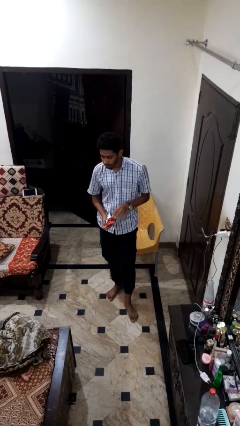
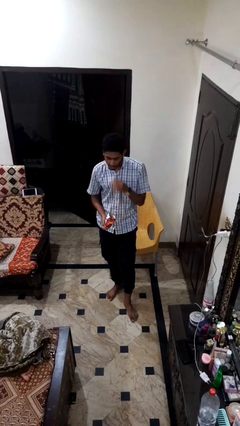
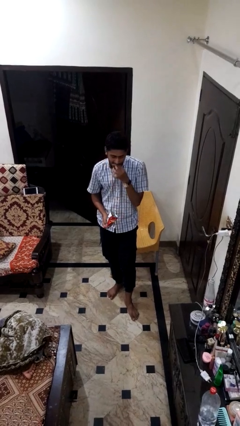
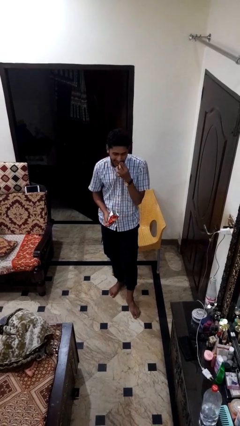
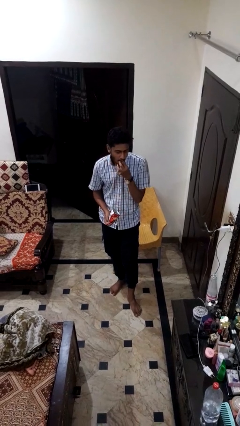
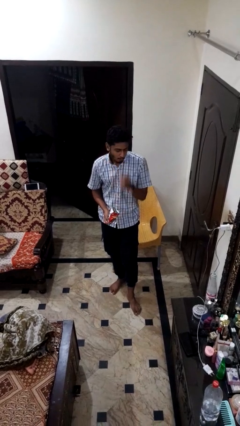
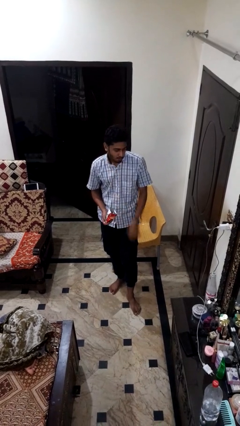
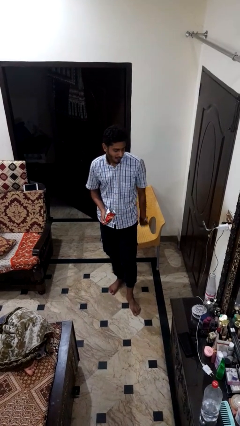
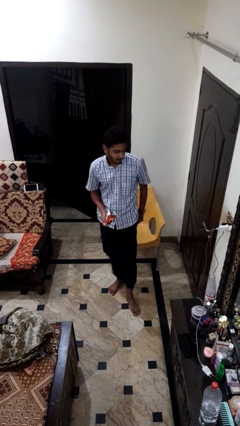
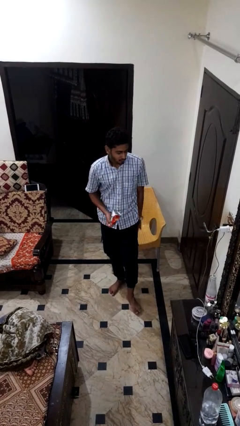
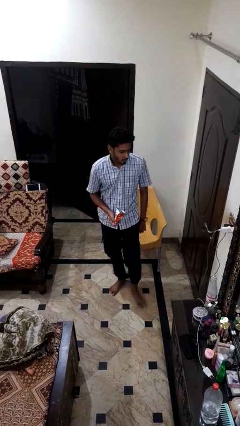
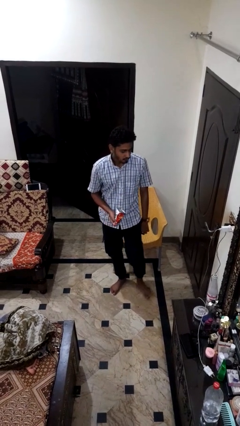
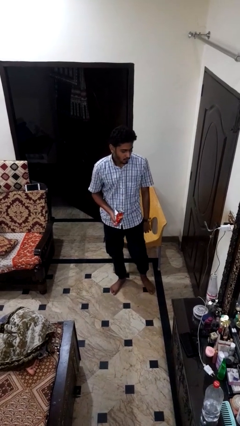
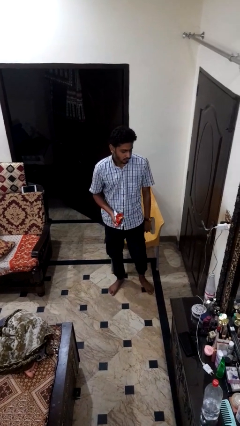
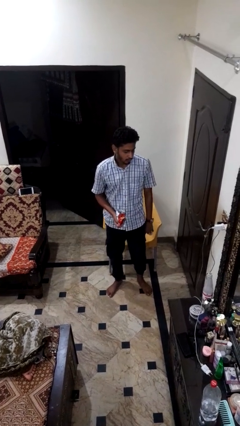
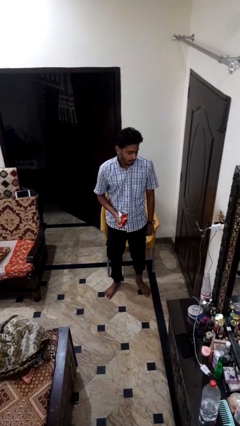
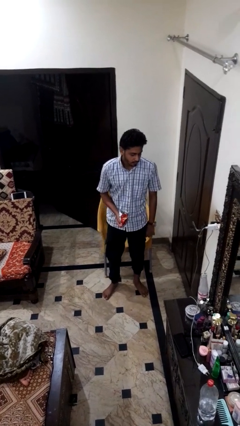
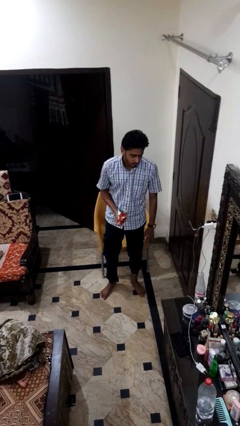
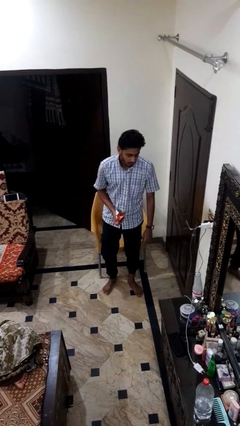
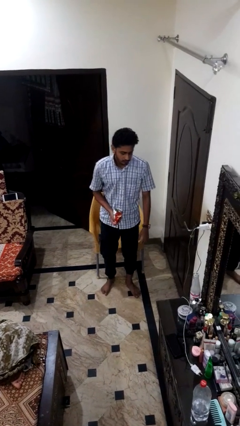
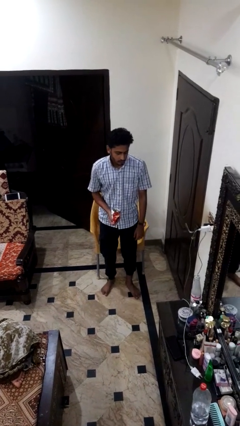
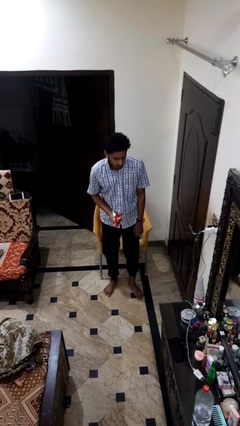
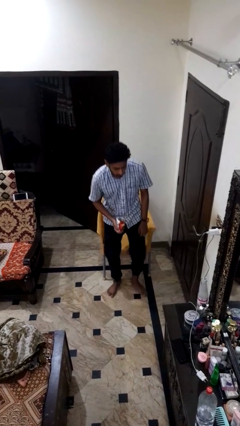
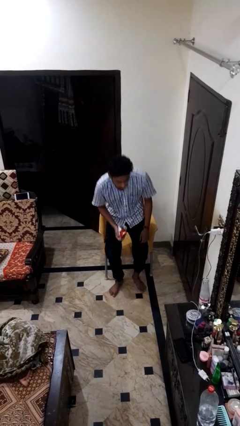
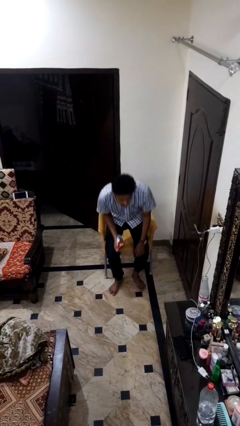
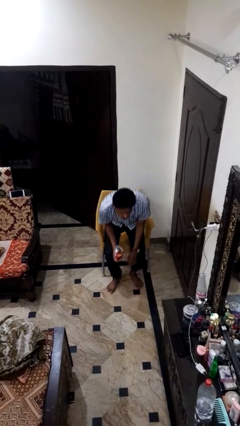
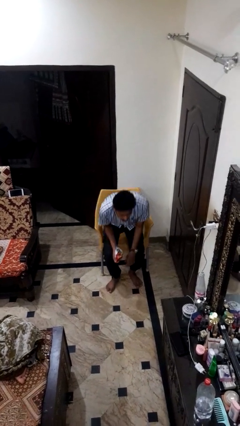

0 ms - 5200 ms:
person eats snack from bag

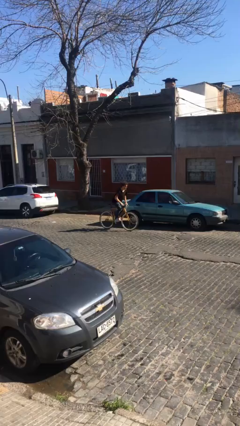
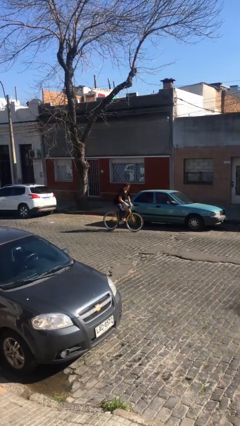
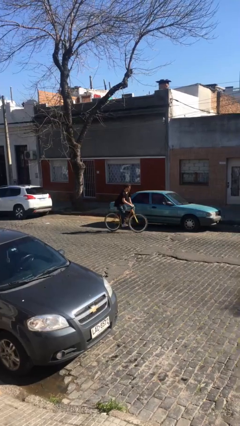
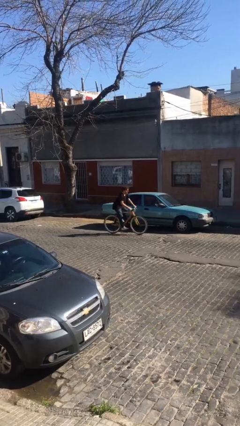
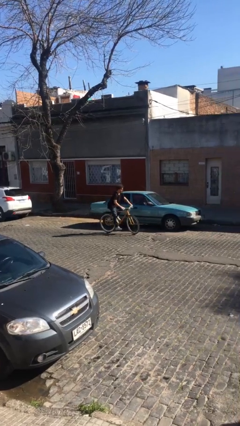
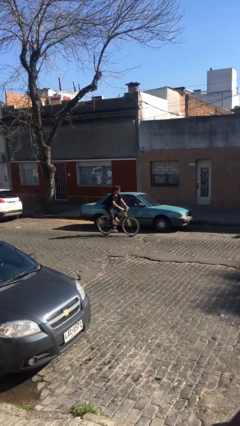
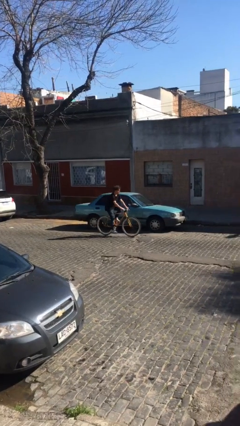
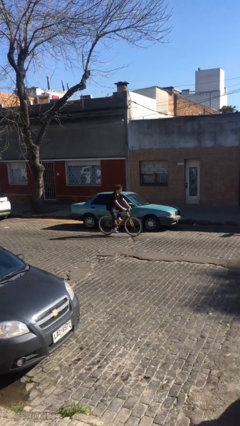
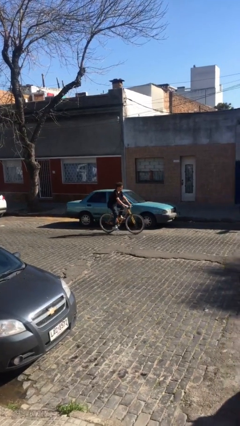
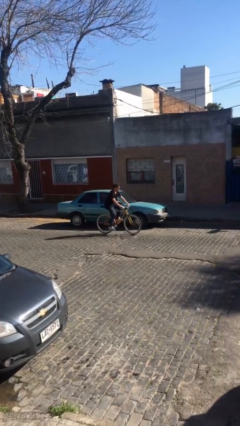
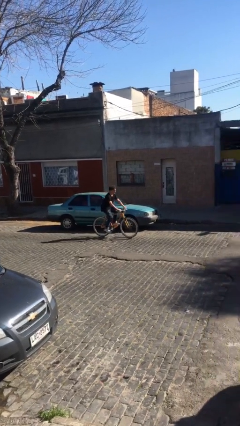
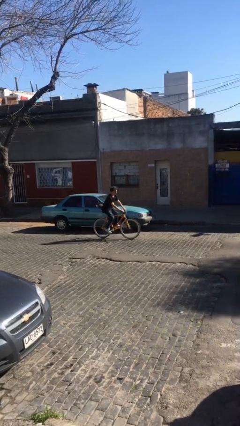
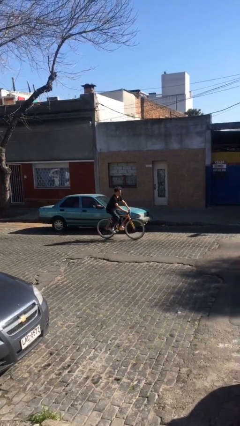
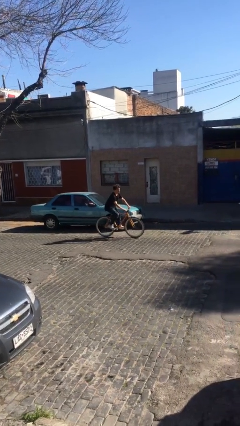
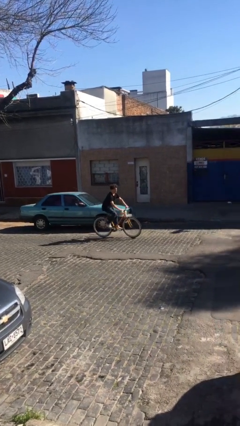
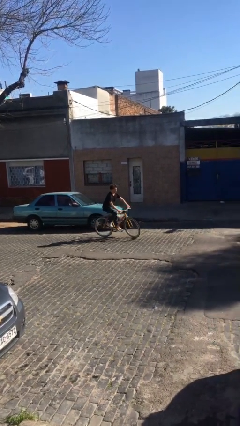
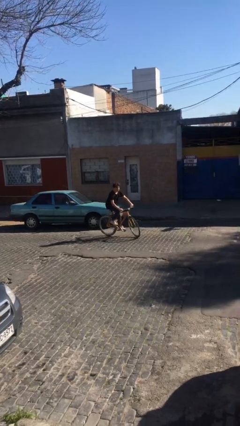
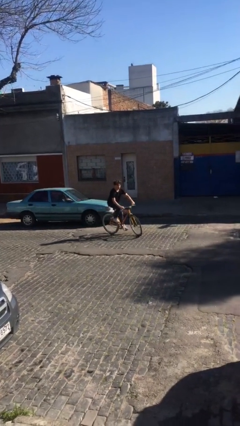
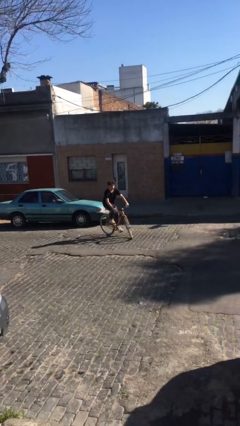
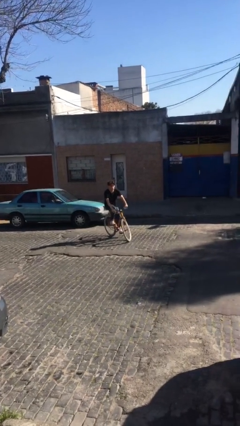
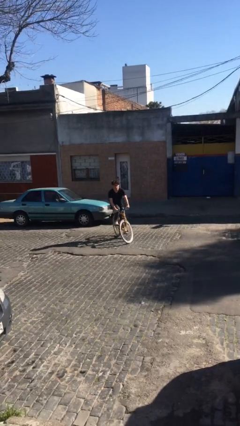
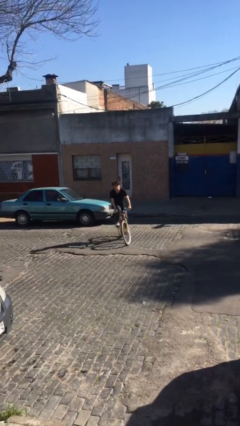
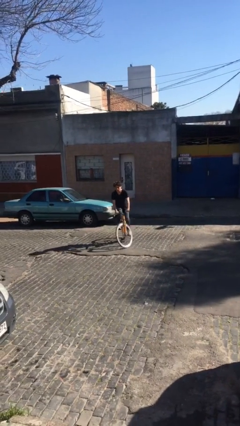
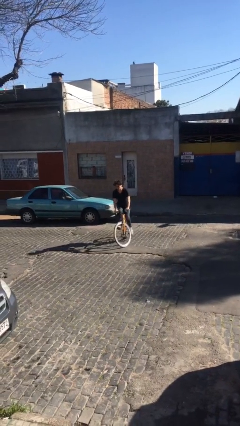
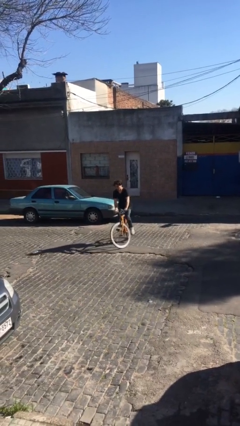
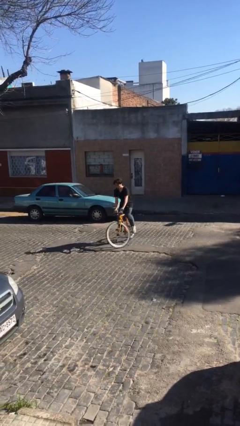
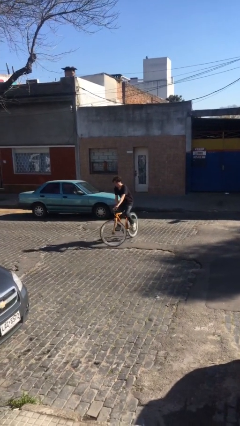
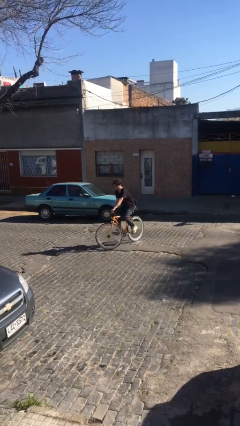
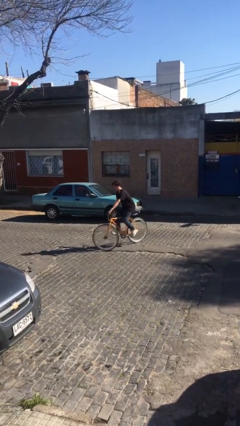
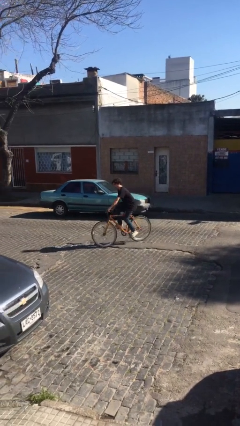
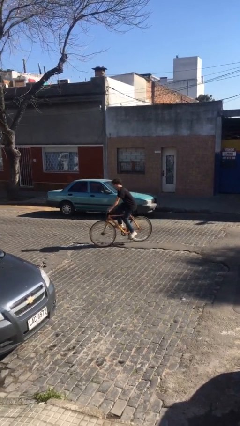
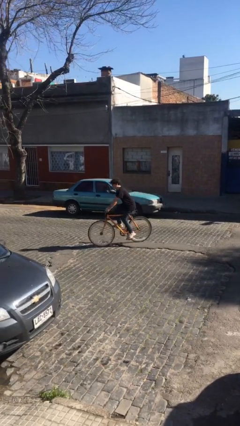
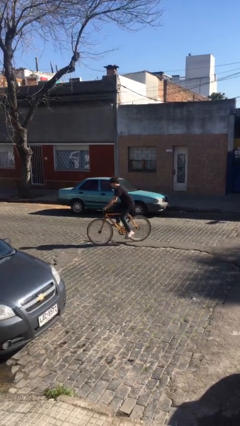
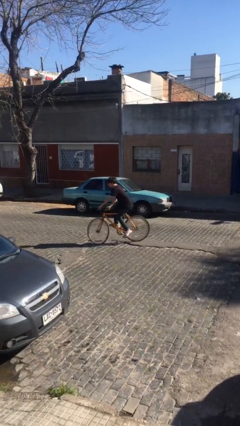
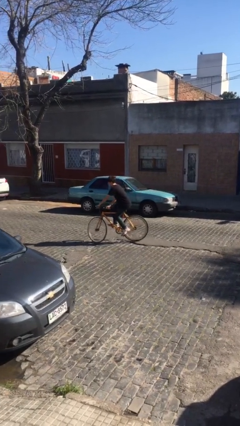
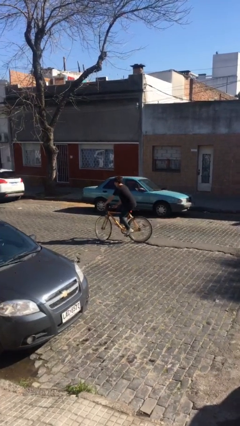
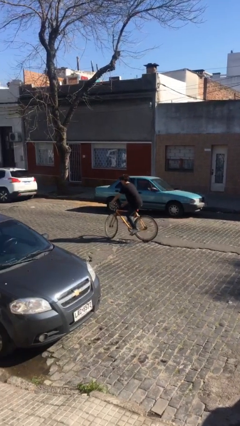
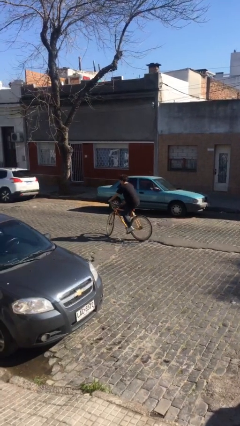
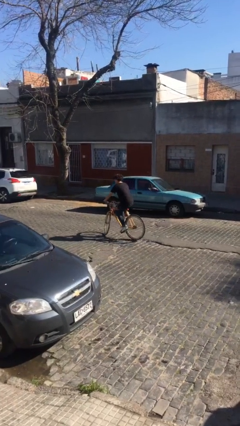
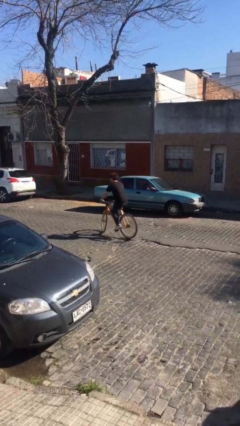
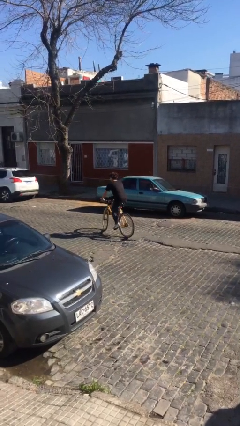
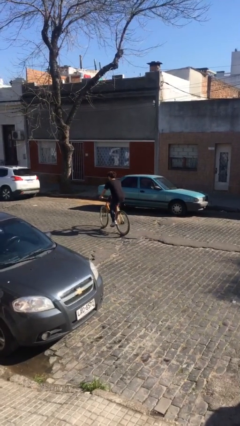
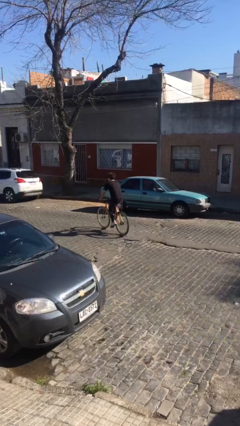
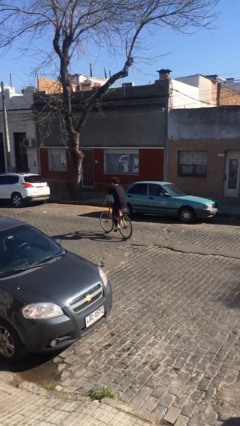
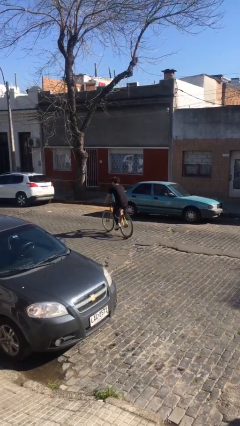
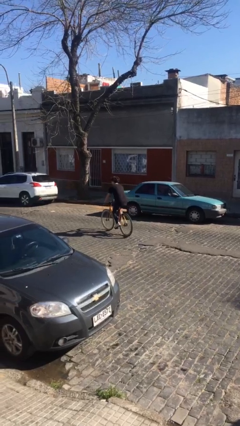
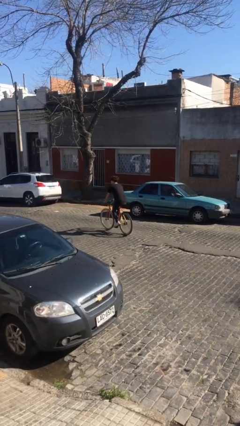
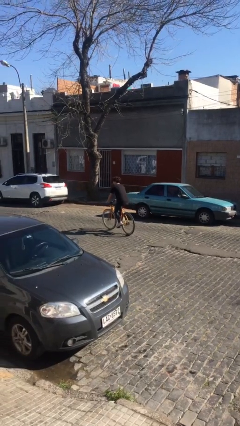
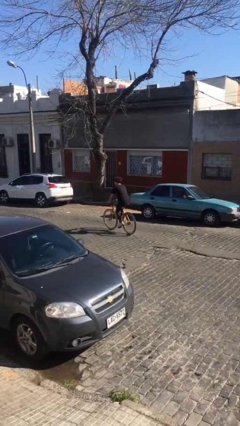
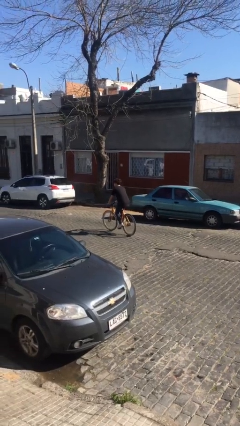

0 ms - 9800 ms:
person rides bicycle

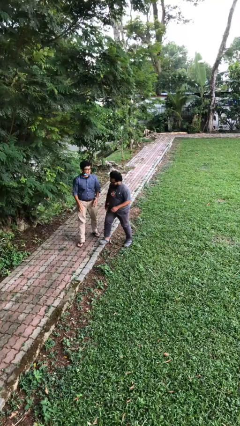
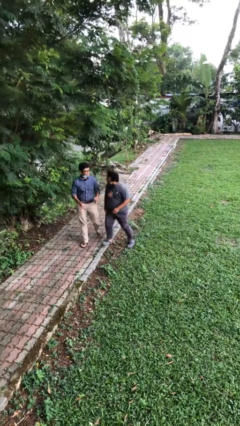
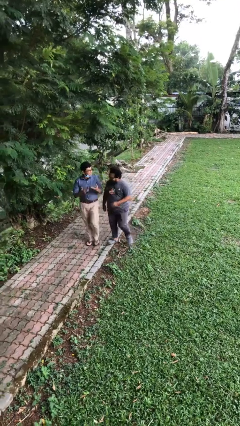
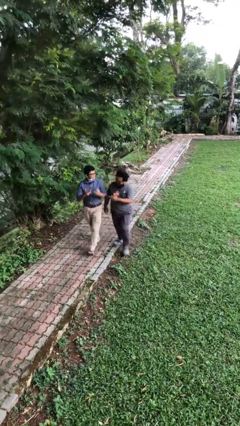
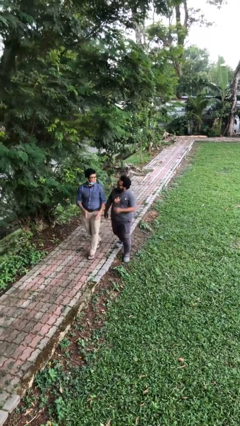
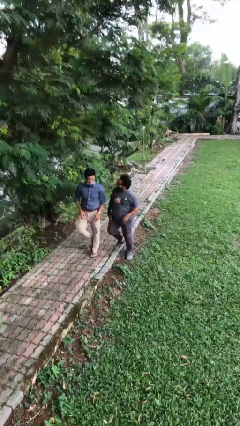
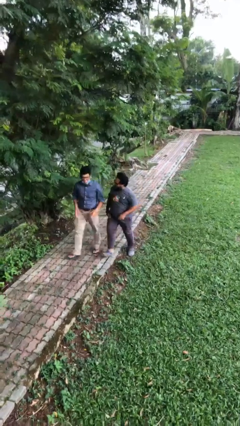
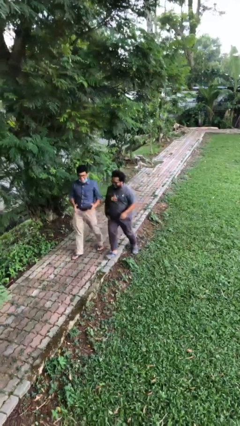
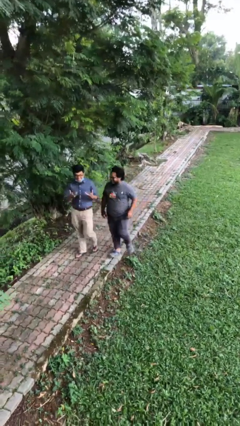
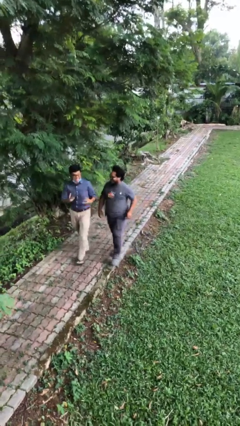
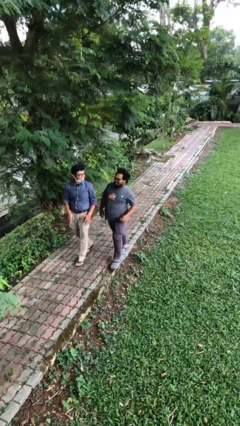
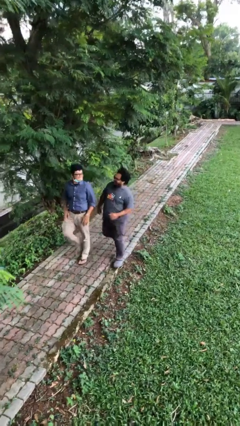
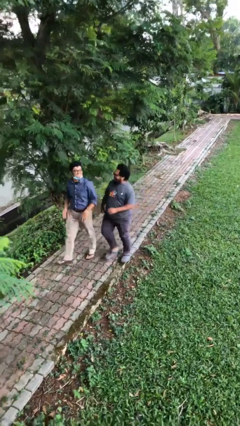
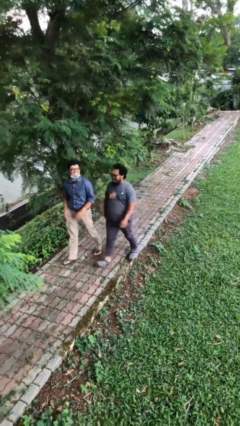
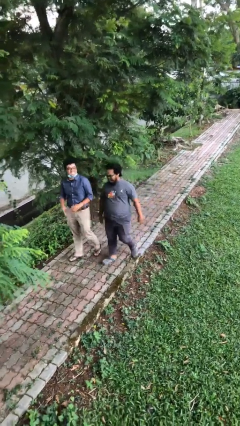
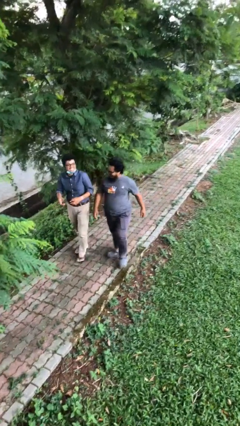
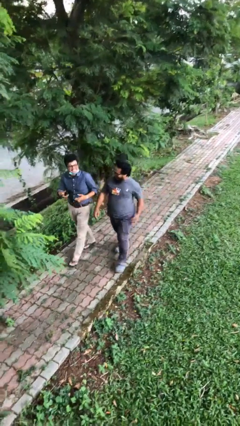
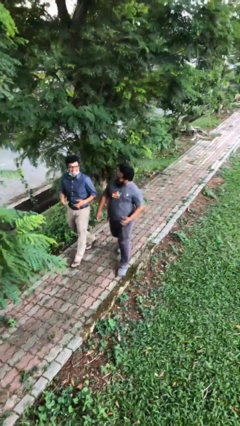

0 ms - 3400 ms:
person talks to person
